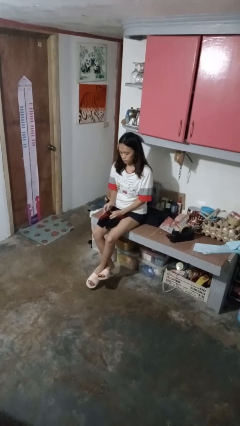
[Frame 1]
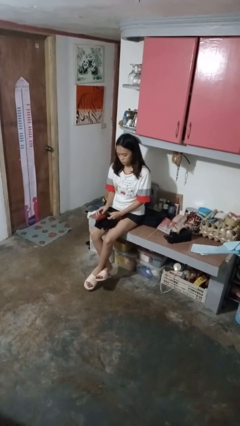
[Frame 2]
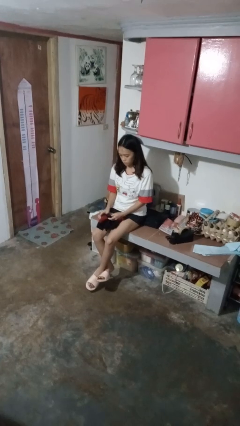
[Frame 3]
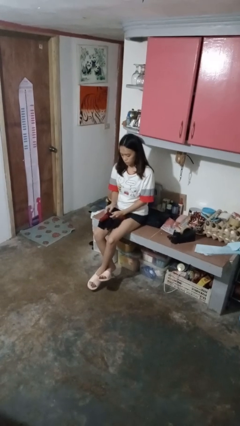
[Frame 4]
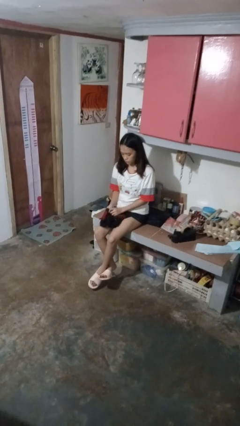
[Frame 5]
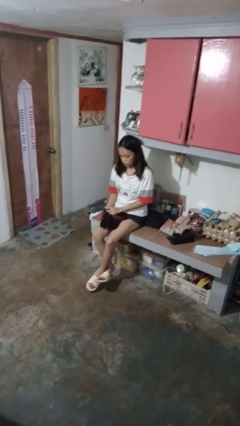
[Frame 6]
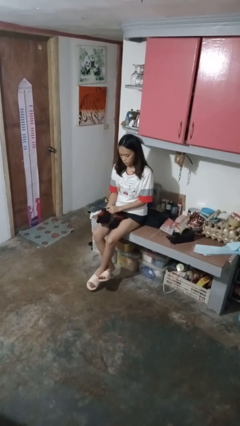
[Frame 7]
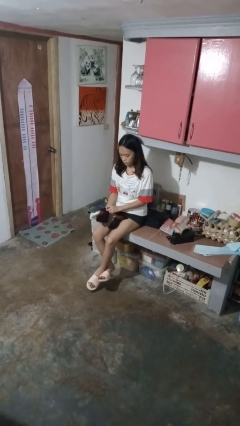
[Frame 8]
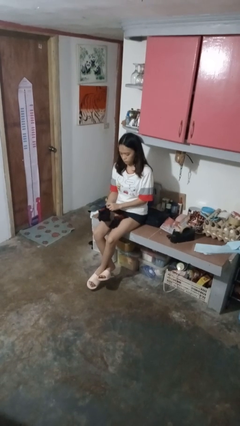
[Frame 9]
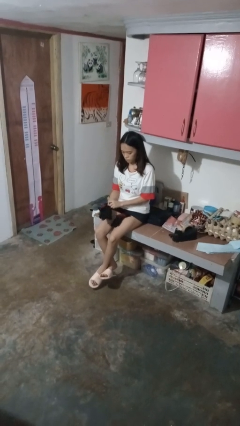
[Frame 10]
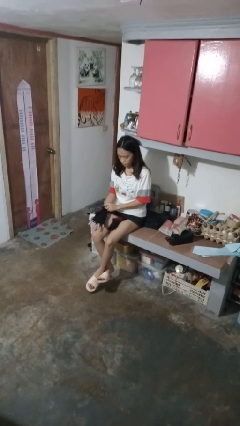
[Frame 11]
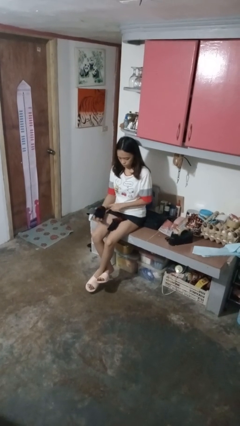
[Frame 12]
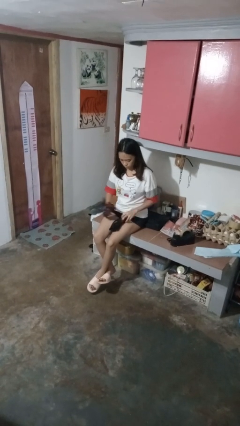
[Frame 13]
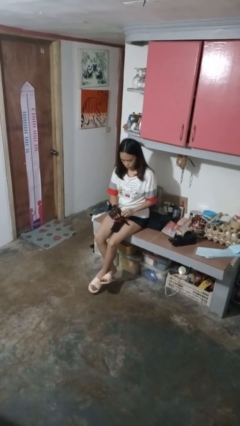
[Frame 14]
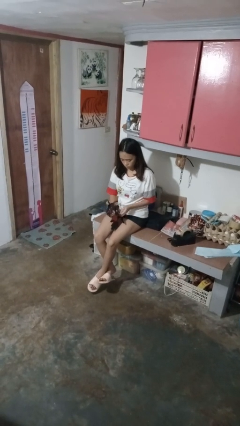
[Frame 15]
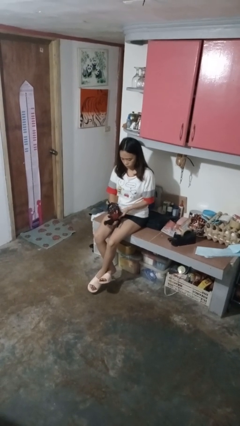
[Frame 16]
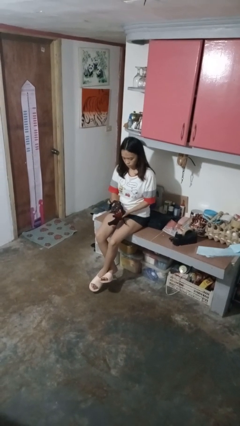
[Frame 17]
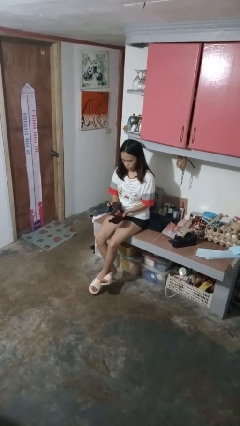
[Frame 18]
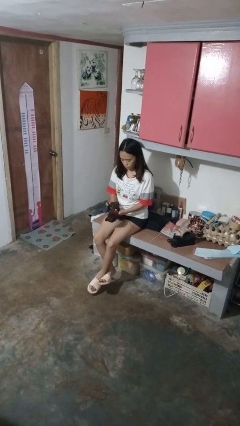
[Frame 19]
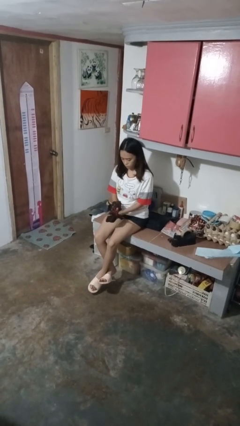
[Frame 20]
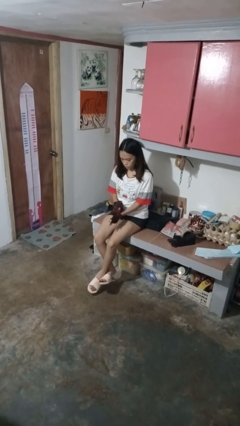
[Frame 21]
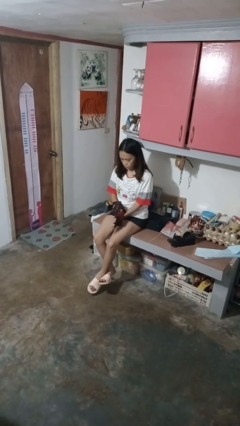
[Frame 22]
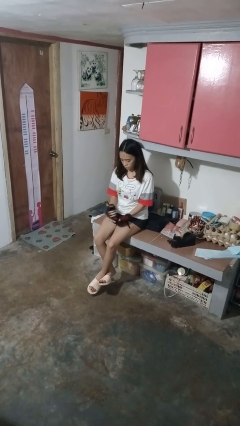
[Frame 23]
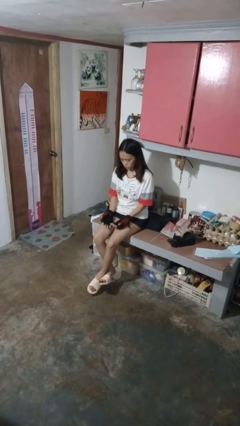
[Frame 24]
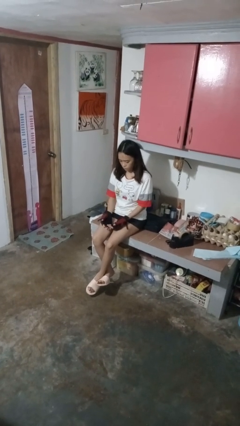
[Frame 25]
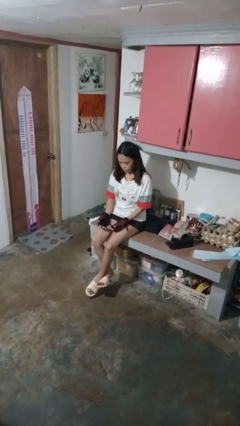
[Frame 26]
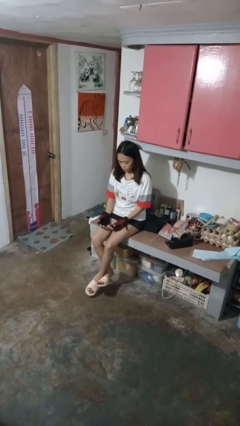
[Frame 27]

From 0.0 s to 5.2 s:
person puts on gloves

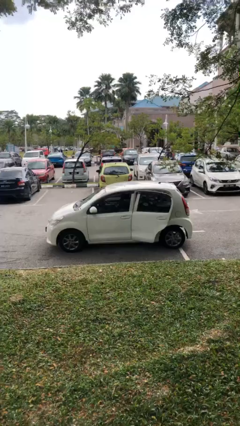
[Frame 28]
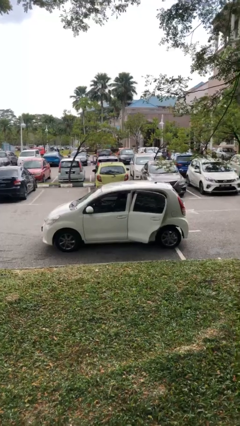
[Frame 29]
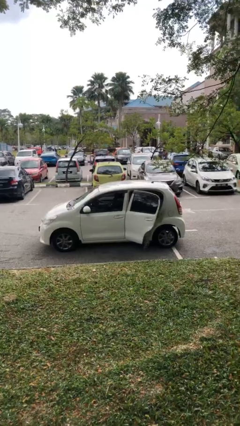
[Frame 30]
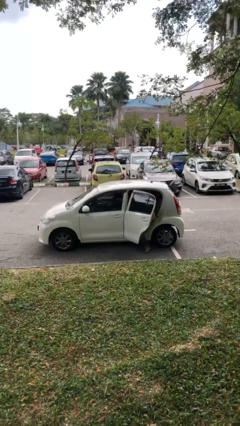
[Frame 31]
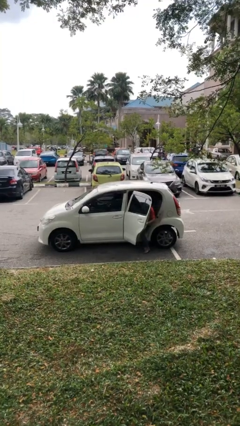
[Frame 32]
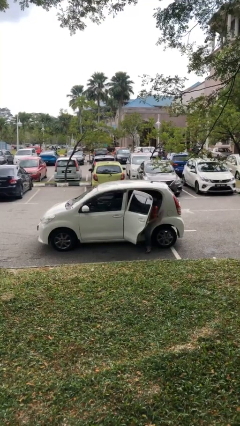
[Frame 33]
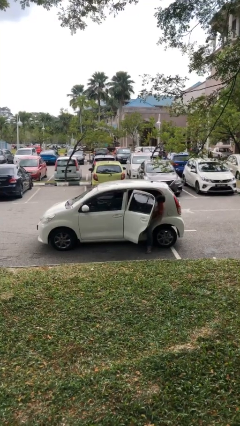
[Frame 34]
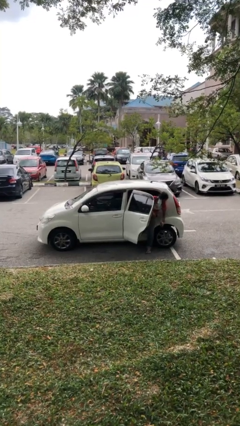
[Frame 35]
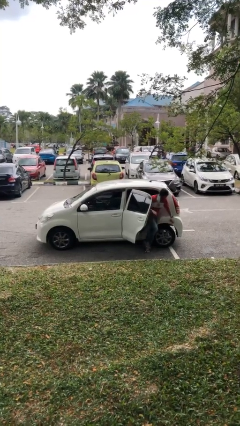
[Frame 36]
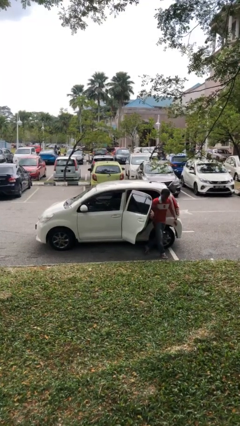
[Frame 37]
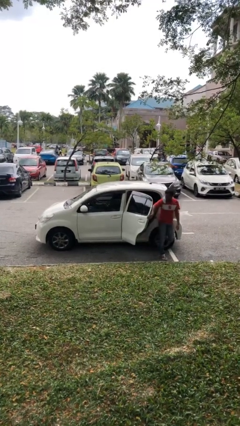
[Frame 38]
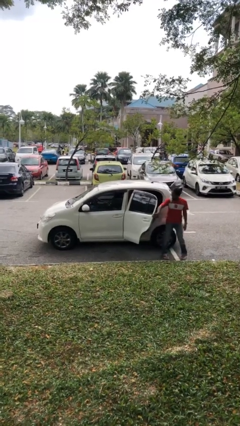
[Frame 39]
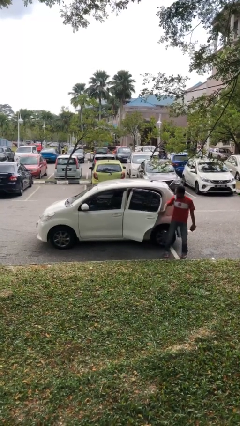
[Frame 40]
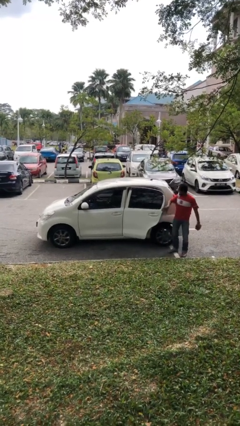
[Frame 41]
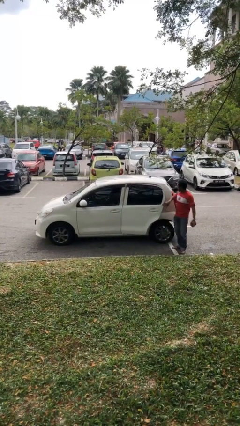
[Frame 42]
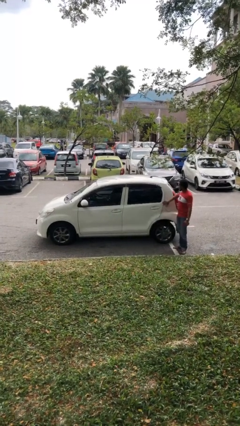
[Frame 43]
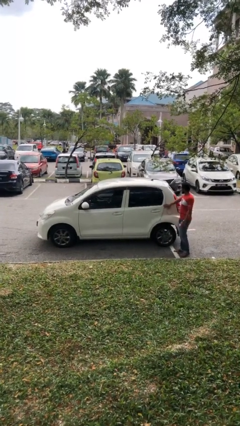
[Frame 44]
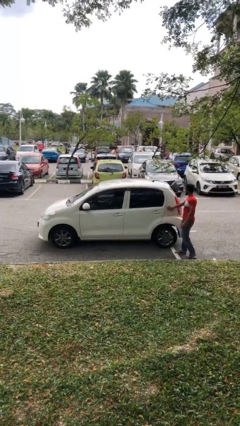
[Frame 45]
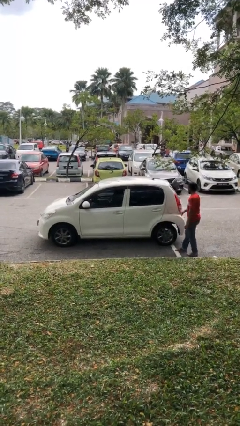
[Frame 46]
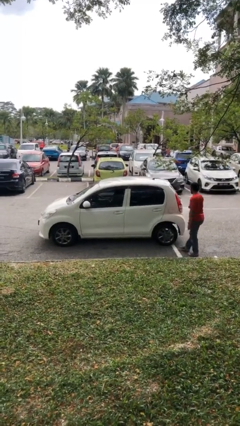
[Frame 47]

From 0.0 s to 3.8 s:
car drops off person

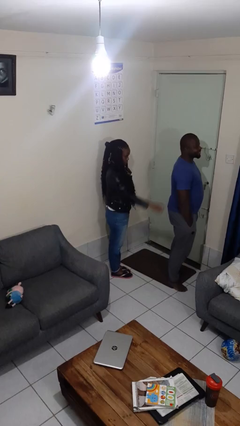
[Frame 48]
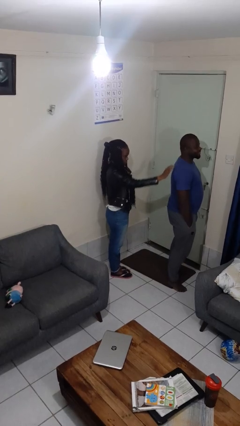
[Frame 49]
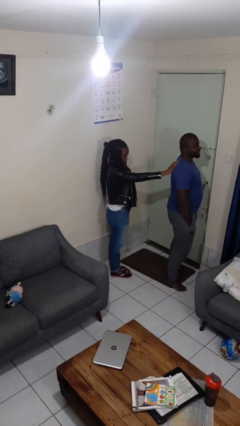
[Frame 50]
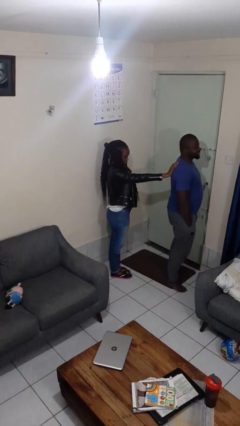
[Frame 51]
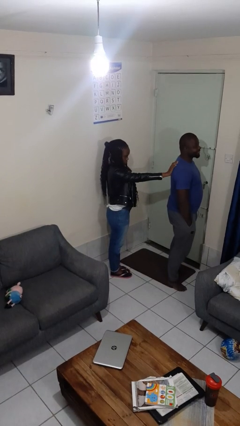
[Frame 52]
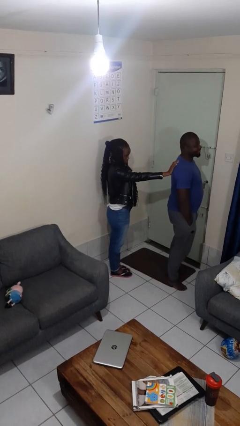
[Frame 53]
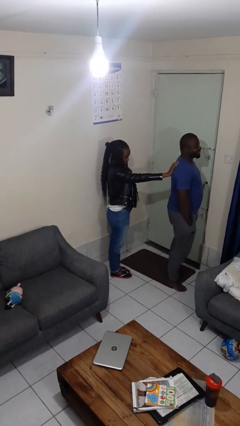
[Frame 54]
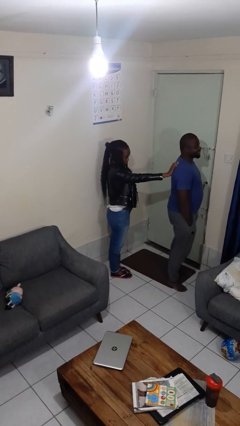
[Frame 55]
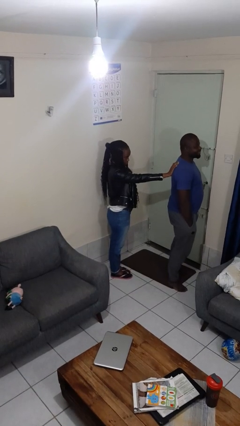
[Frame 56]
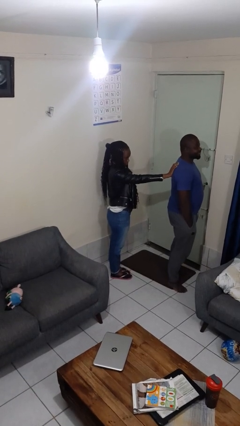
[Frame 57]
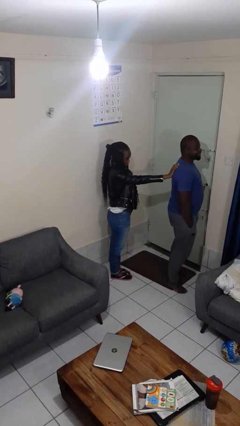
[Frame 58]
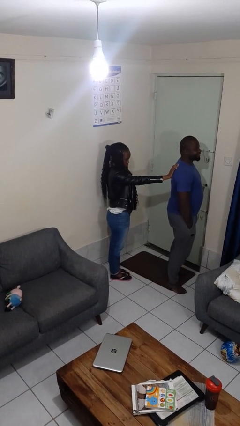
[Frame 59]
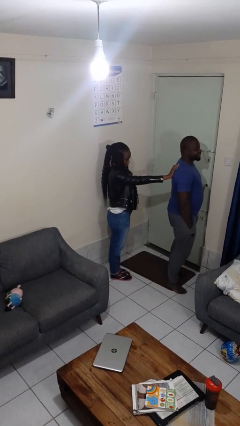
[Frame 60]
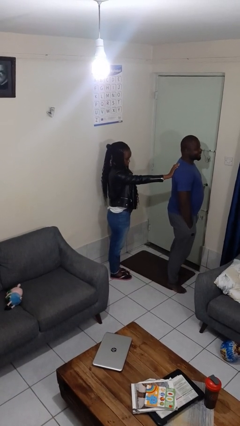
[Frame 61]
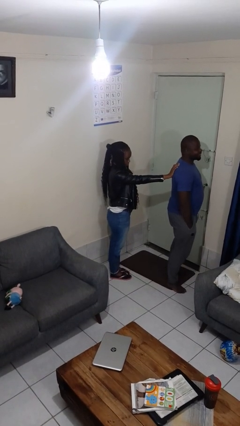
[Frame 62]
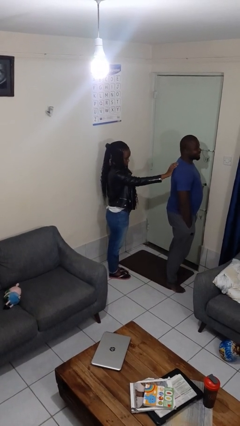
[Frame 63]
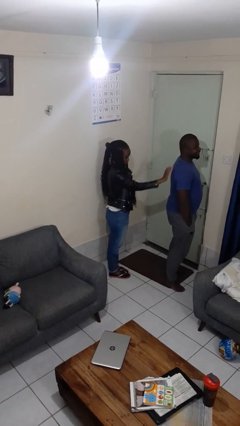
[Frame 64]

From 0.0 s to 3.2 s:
person touches back of person

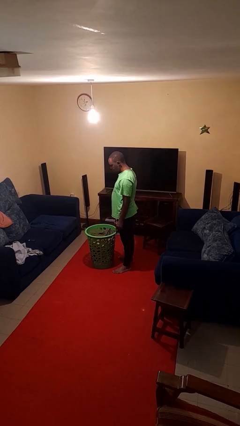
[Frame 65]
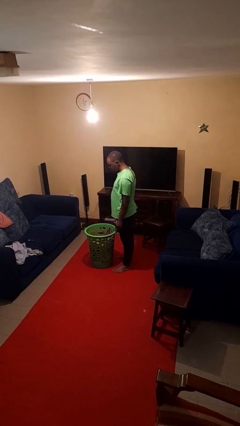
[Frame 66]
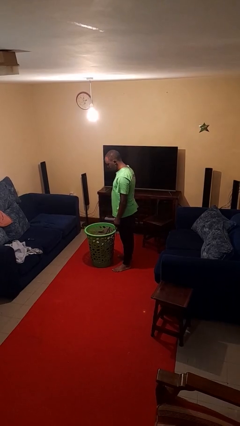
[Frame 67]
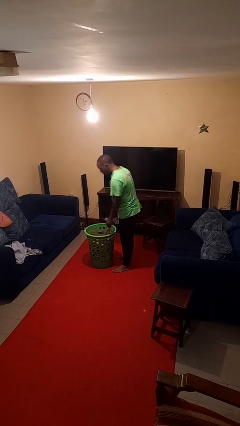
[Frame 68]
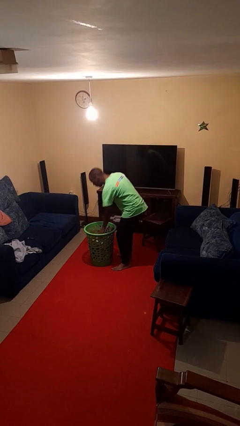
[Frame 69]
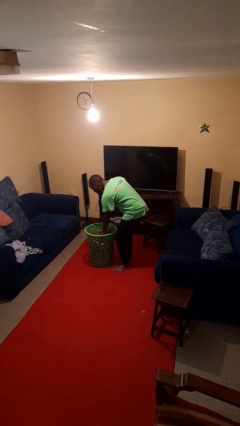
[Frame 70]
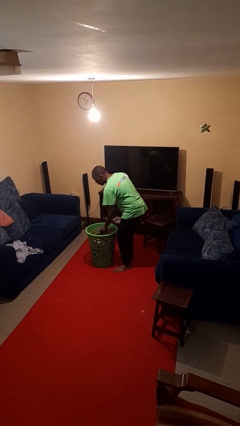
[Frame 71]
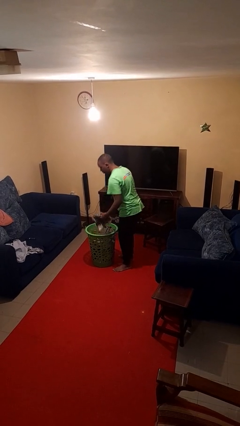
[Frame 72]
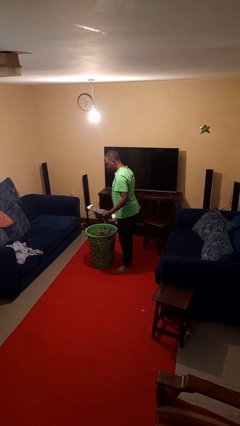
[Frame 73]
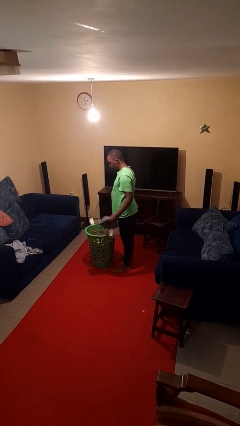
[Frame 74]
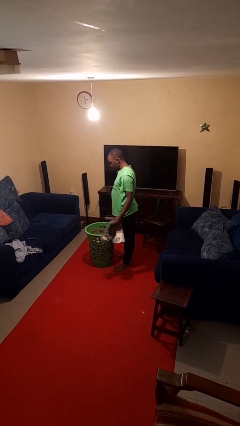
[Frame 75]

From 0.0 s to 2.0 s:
person takes object from basket

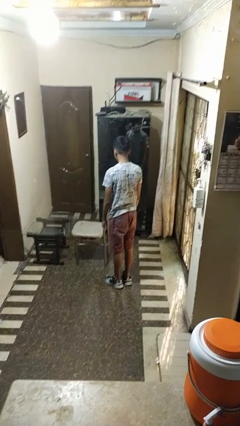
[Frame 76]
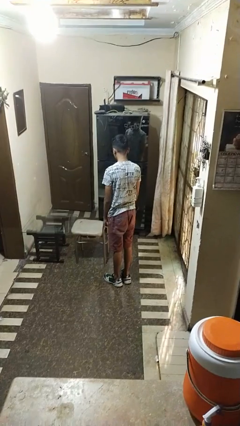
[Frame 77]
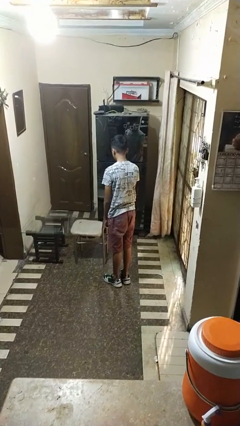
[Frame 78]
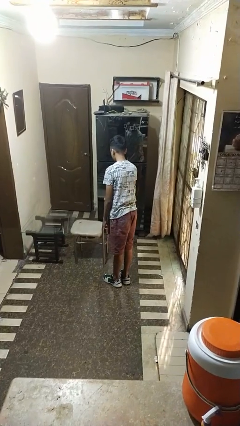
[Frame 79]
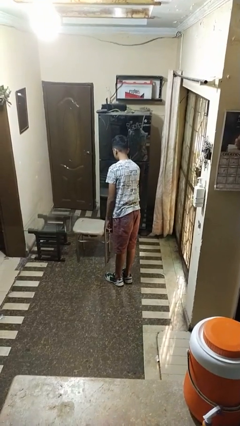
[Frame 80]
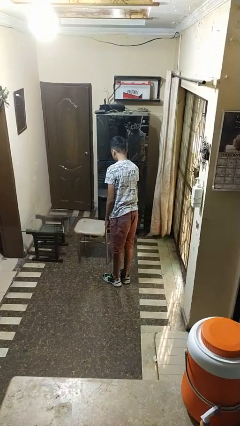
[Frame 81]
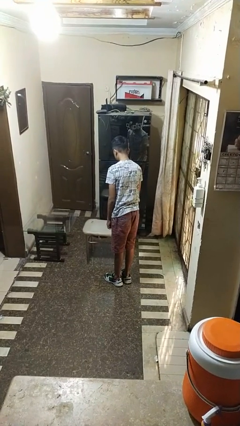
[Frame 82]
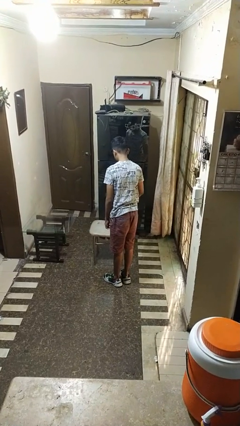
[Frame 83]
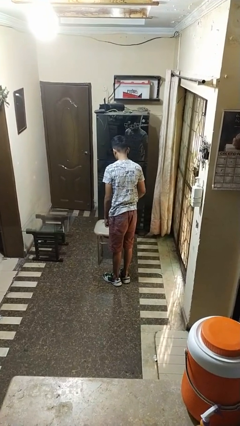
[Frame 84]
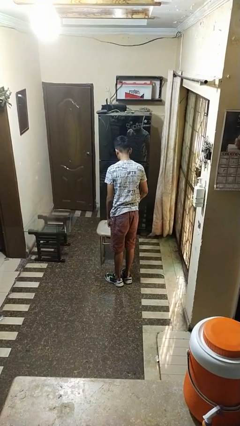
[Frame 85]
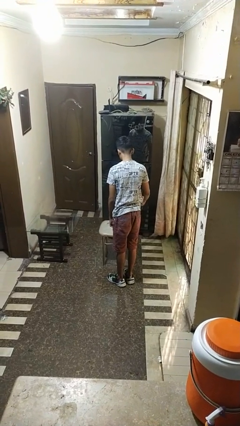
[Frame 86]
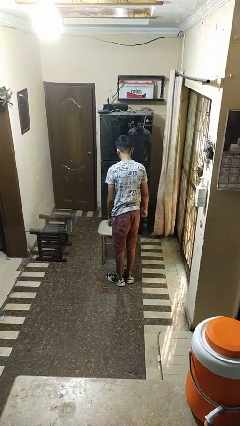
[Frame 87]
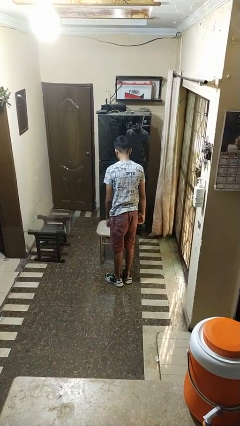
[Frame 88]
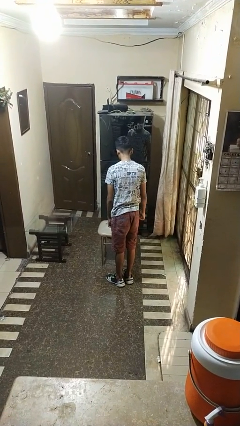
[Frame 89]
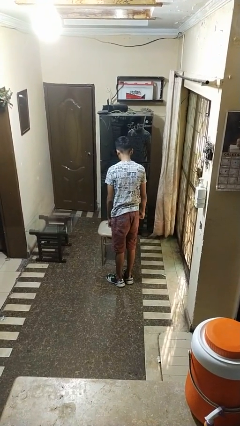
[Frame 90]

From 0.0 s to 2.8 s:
person pulls out chair

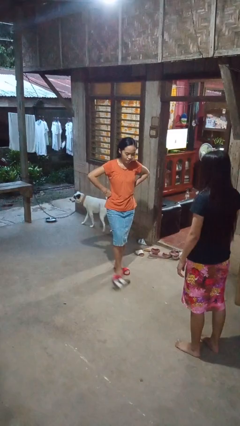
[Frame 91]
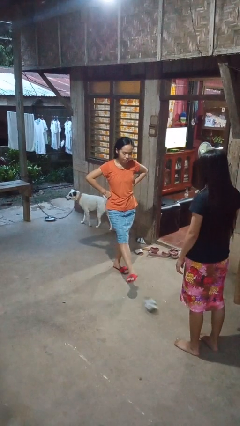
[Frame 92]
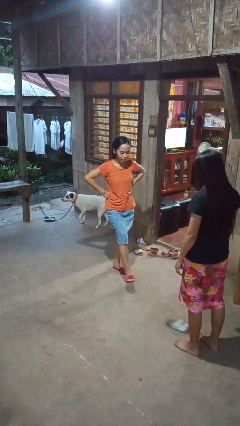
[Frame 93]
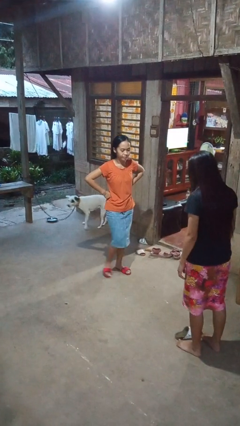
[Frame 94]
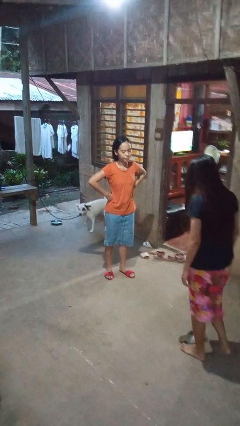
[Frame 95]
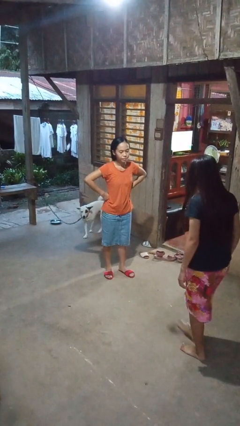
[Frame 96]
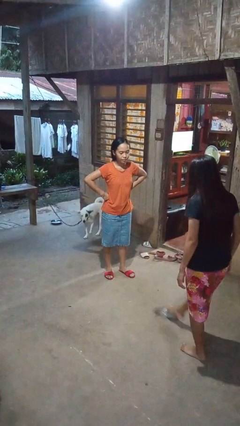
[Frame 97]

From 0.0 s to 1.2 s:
person kicks object to person
